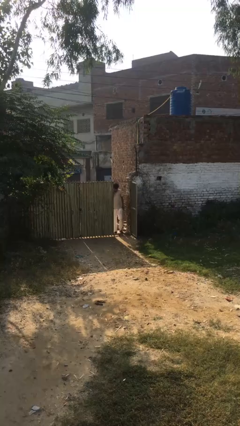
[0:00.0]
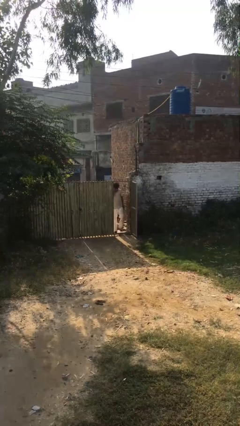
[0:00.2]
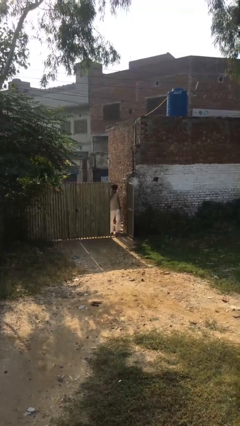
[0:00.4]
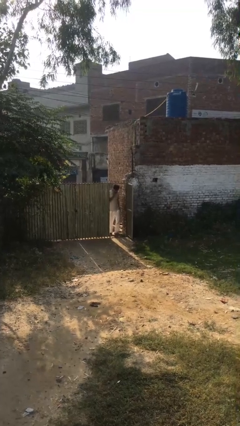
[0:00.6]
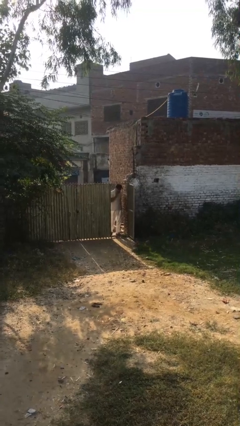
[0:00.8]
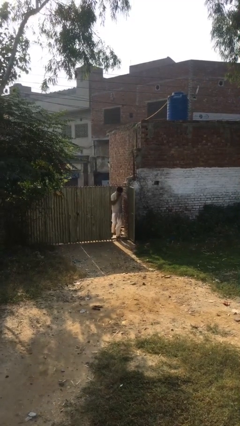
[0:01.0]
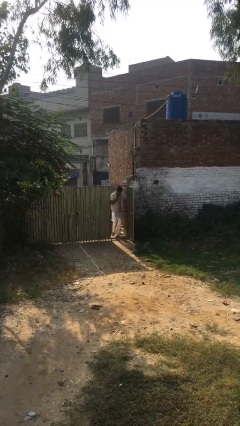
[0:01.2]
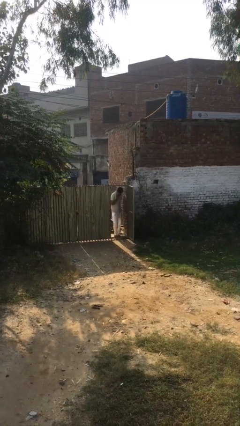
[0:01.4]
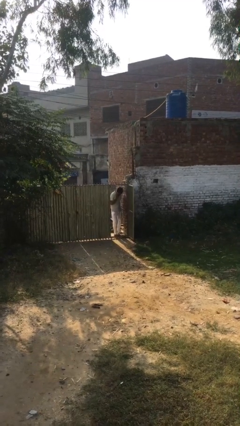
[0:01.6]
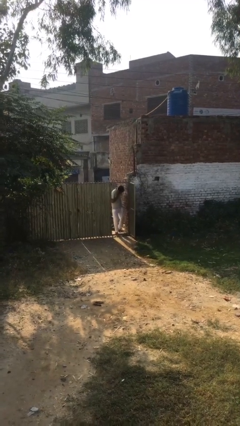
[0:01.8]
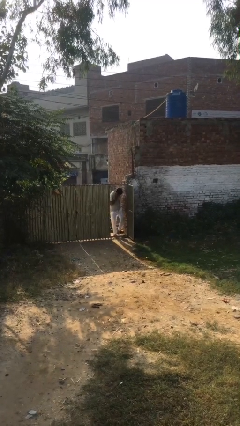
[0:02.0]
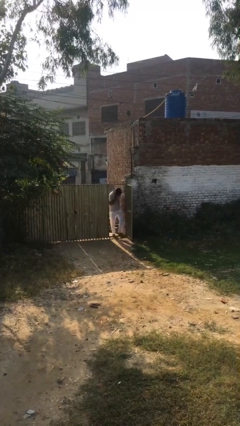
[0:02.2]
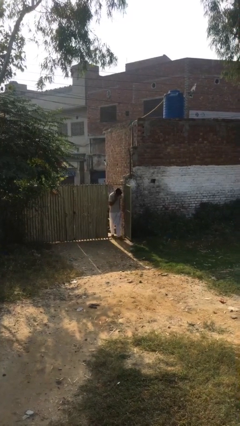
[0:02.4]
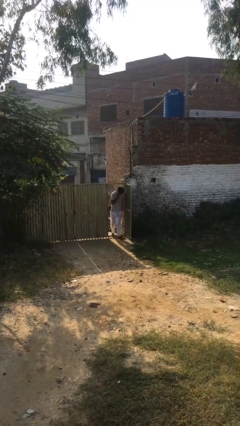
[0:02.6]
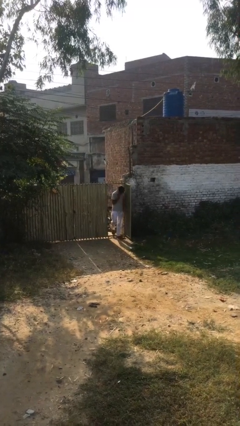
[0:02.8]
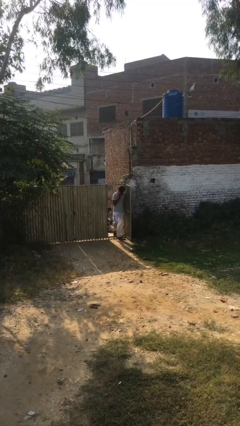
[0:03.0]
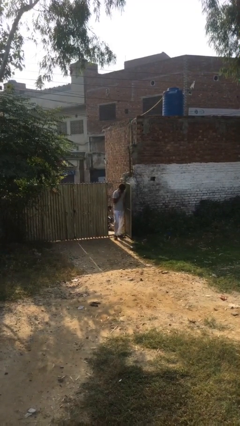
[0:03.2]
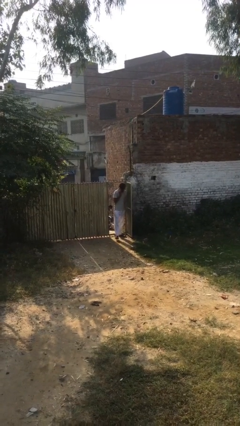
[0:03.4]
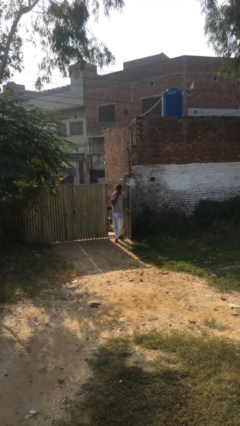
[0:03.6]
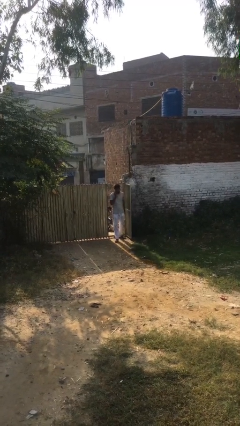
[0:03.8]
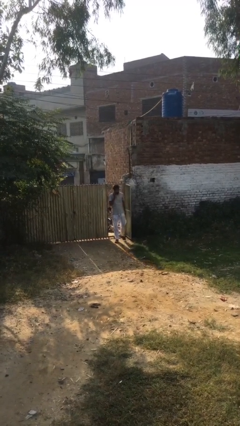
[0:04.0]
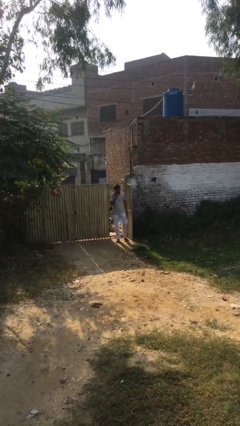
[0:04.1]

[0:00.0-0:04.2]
person enters scene through structure

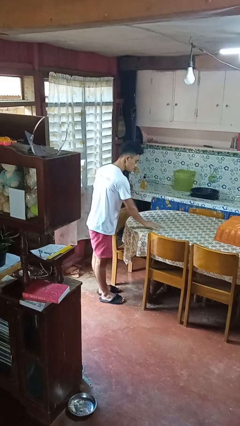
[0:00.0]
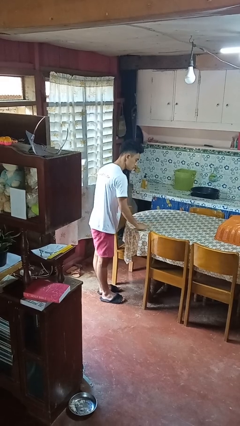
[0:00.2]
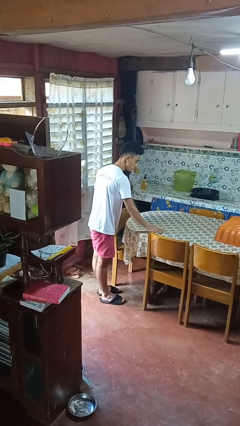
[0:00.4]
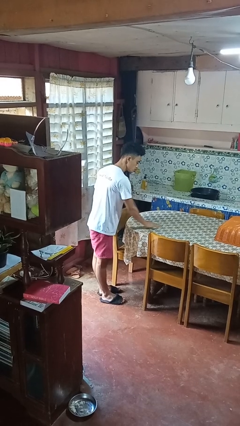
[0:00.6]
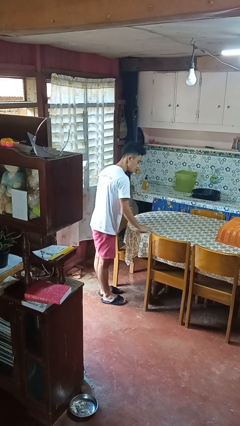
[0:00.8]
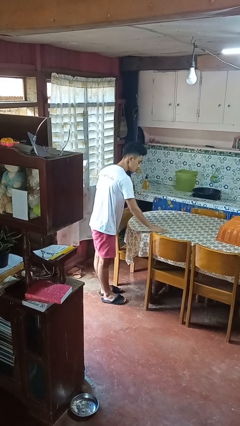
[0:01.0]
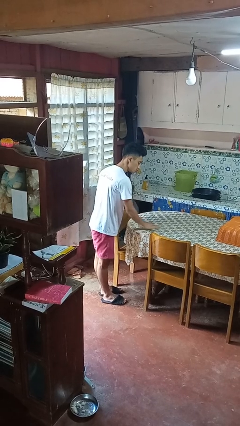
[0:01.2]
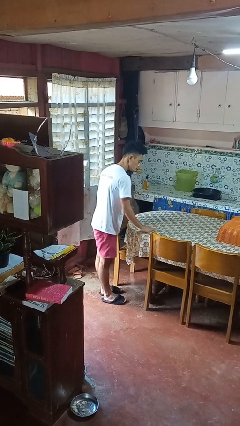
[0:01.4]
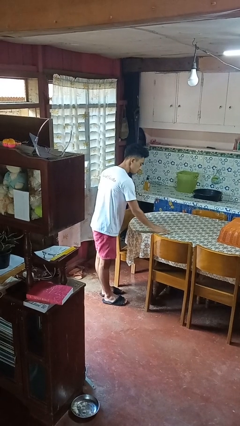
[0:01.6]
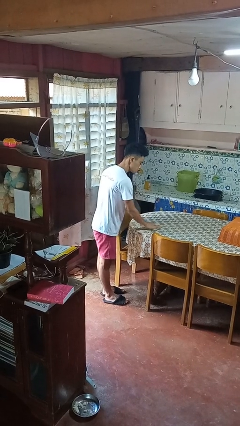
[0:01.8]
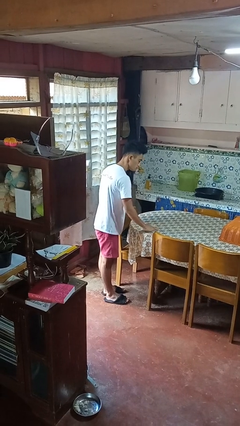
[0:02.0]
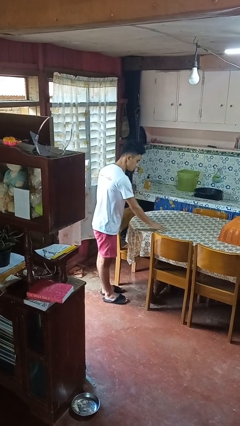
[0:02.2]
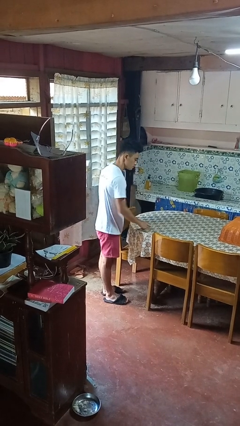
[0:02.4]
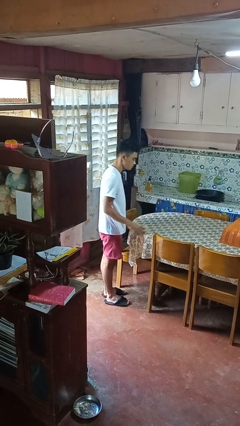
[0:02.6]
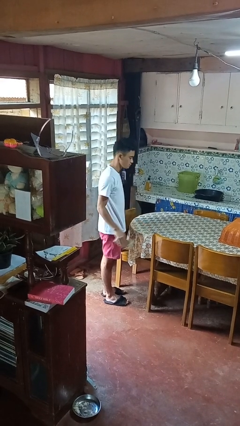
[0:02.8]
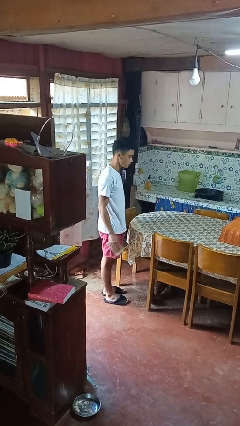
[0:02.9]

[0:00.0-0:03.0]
person cleans table with rag

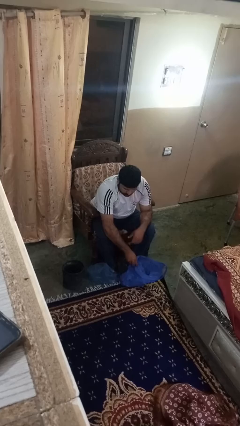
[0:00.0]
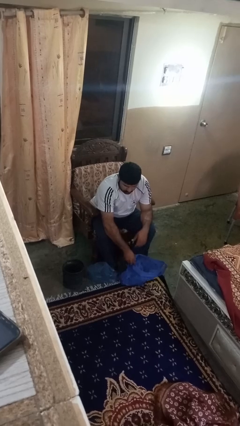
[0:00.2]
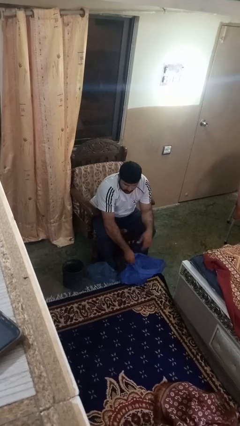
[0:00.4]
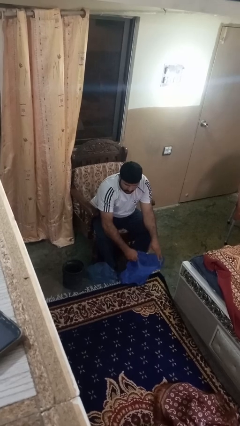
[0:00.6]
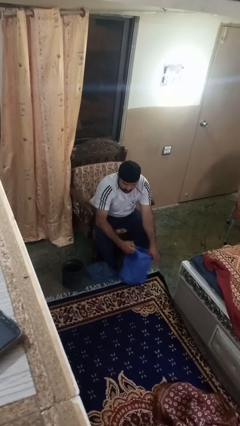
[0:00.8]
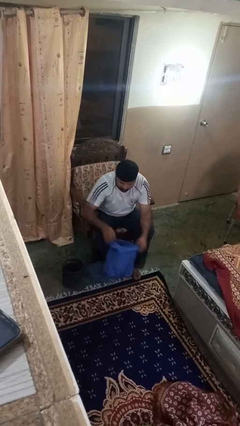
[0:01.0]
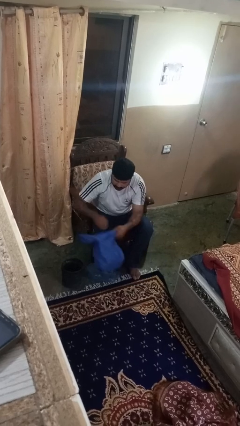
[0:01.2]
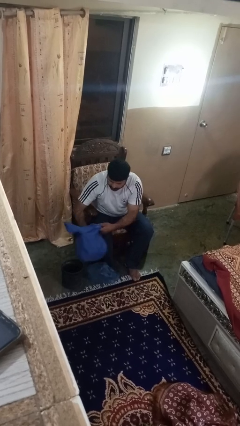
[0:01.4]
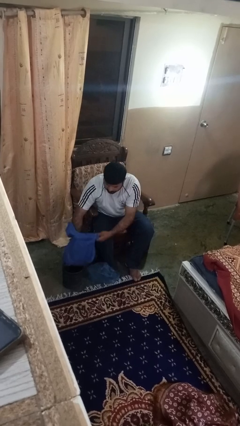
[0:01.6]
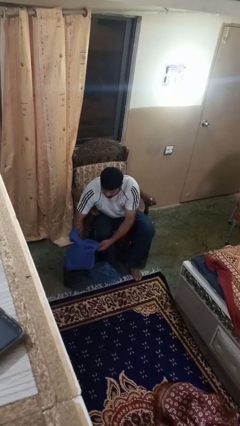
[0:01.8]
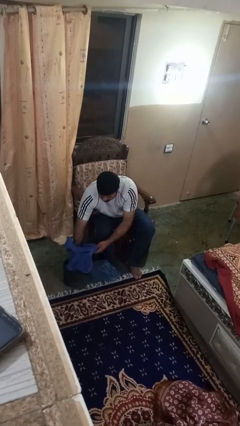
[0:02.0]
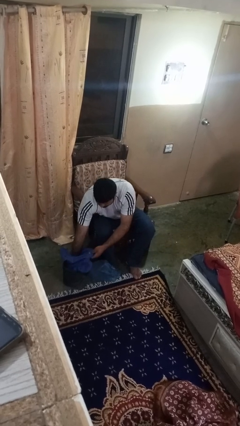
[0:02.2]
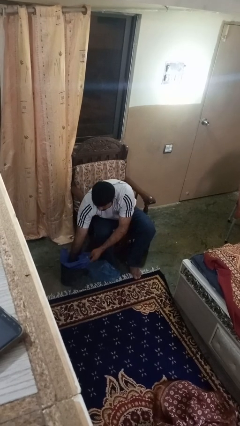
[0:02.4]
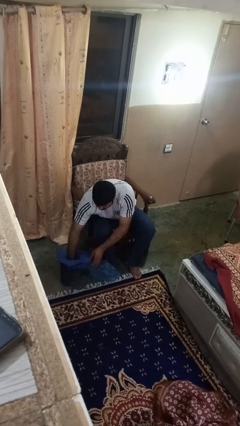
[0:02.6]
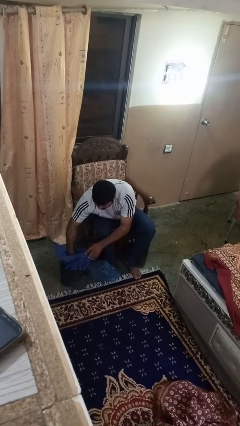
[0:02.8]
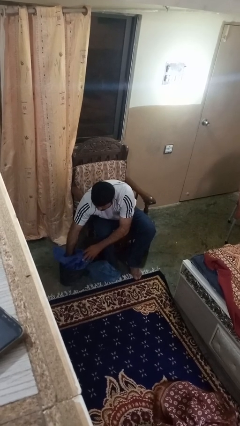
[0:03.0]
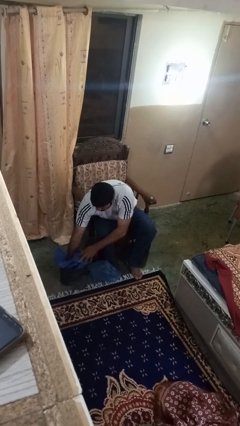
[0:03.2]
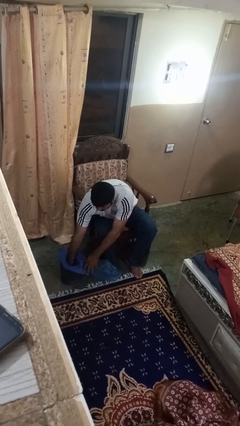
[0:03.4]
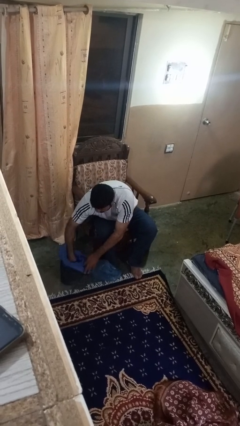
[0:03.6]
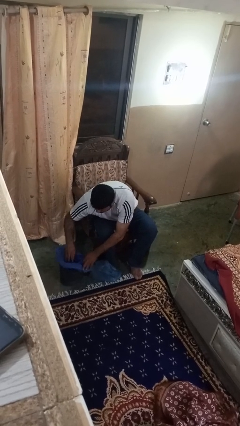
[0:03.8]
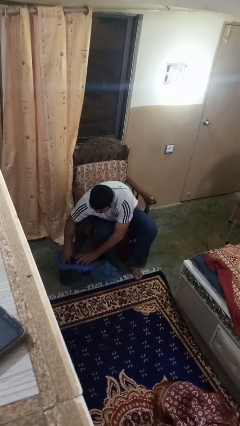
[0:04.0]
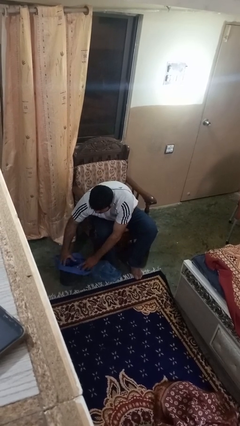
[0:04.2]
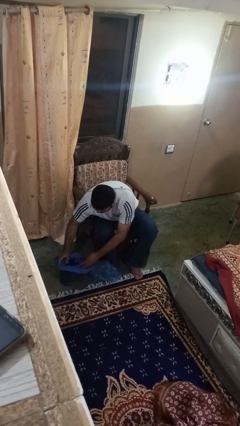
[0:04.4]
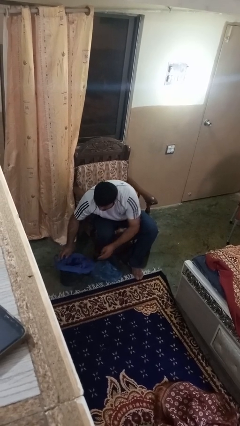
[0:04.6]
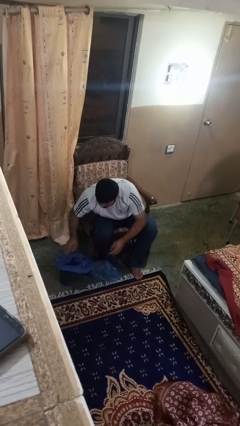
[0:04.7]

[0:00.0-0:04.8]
person inserts trashbag into trashcan

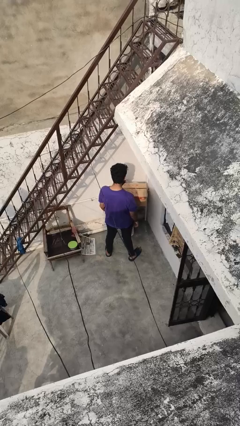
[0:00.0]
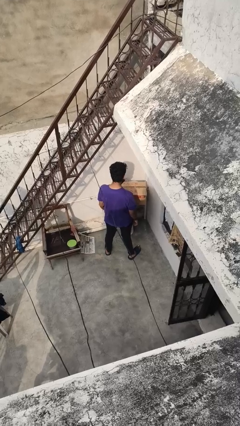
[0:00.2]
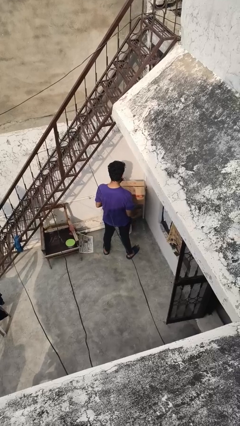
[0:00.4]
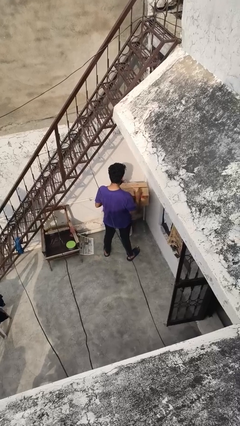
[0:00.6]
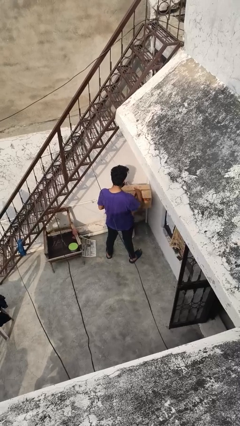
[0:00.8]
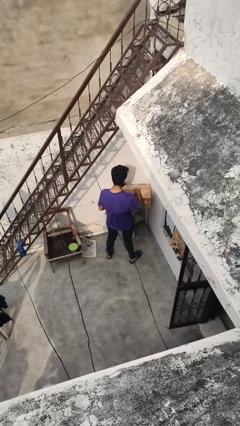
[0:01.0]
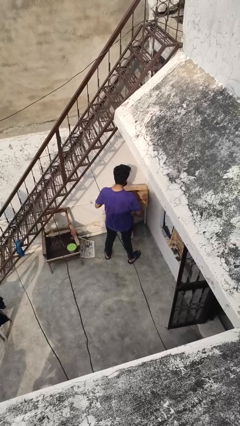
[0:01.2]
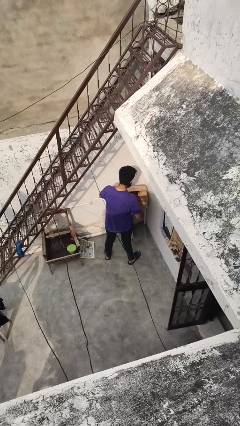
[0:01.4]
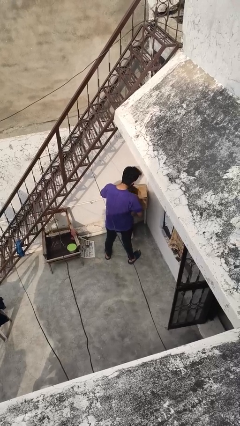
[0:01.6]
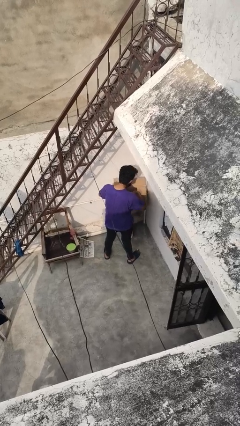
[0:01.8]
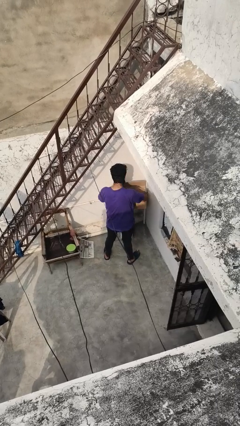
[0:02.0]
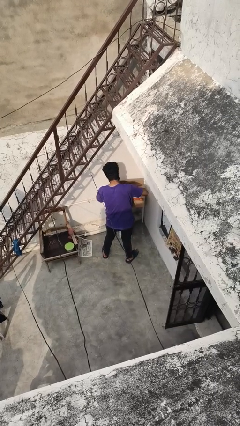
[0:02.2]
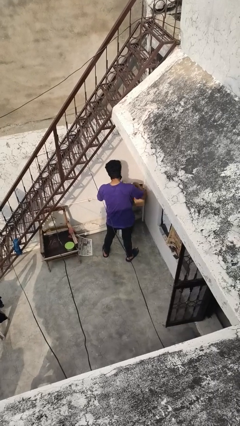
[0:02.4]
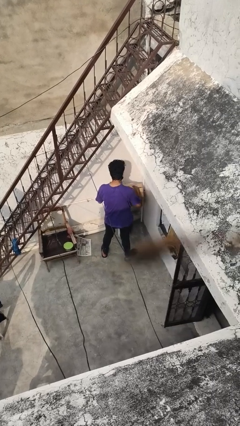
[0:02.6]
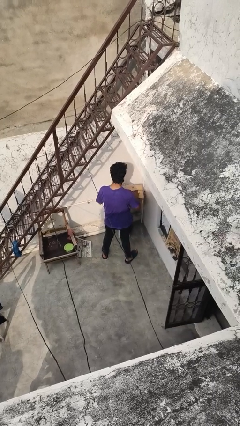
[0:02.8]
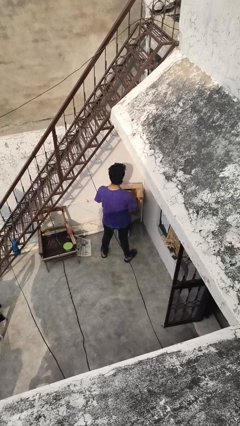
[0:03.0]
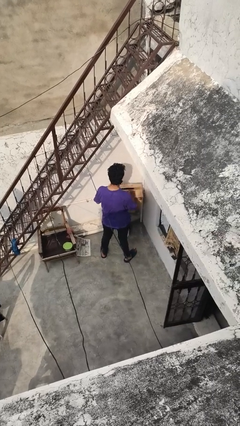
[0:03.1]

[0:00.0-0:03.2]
person searches in box

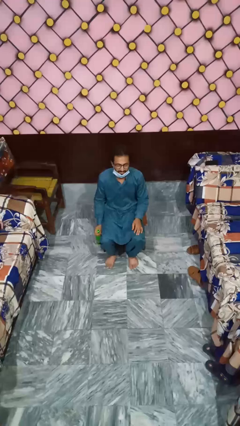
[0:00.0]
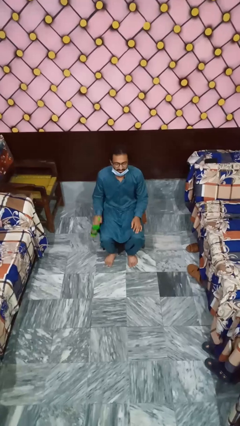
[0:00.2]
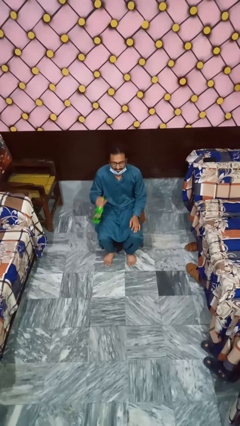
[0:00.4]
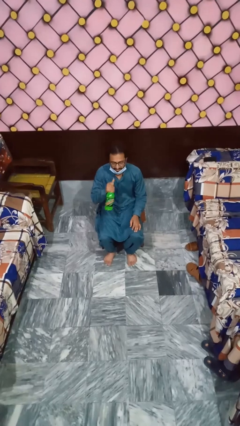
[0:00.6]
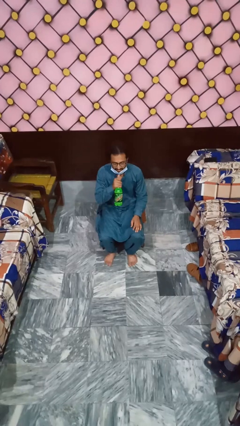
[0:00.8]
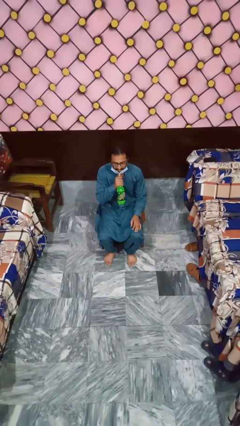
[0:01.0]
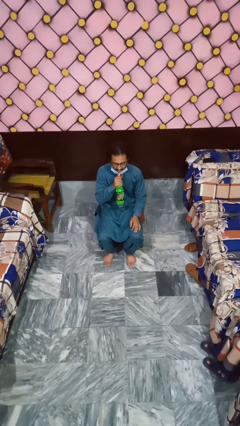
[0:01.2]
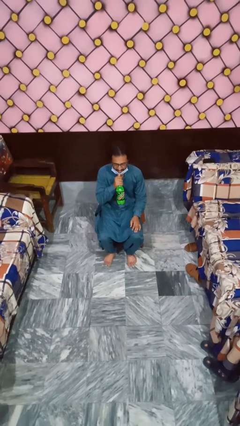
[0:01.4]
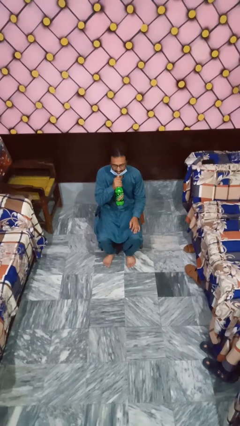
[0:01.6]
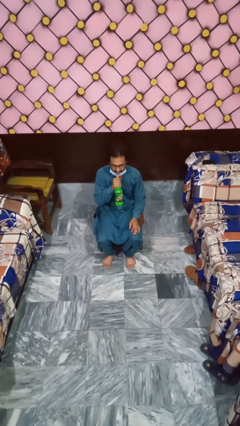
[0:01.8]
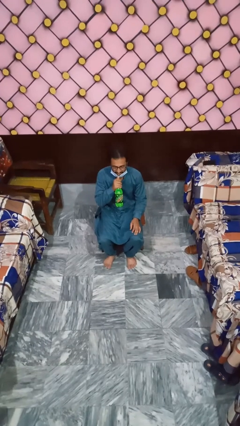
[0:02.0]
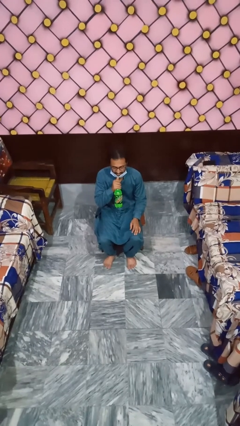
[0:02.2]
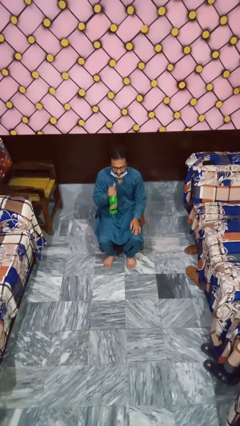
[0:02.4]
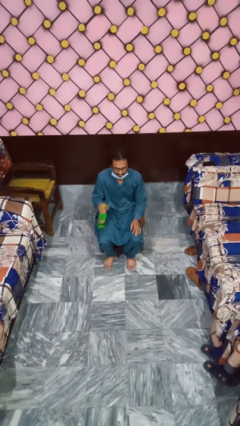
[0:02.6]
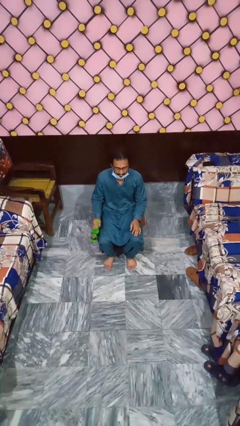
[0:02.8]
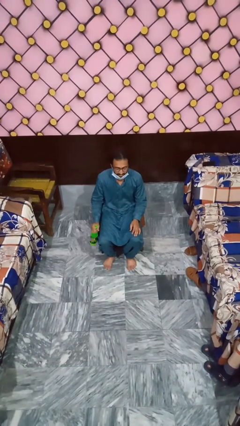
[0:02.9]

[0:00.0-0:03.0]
person drinks from straw
